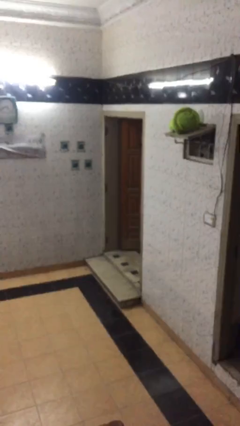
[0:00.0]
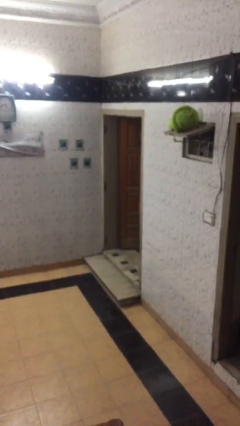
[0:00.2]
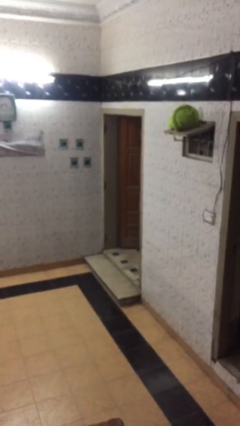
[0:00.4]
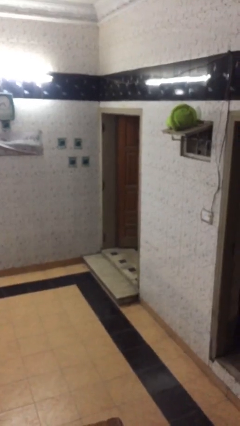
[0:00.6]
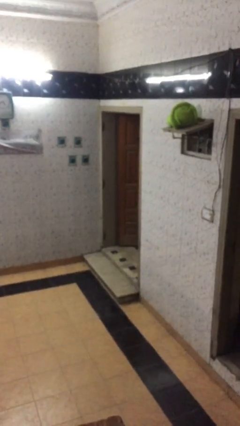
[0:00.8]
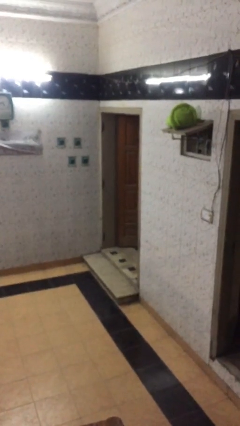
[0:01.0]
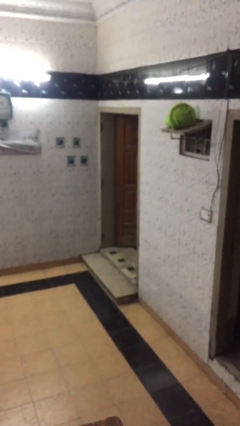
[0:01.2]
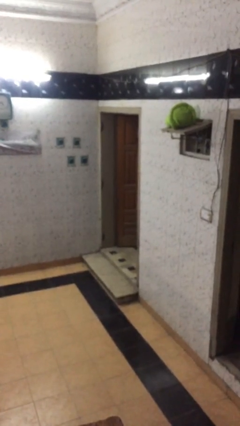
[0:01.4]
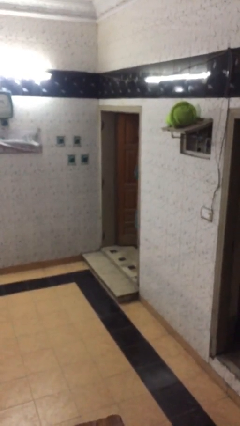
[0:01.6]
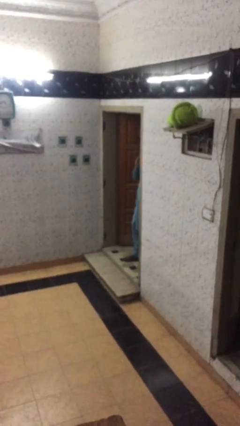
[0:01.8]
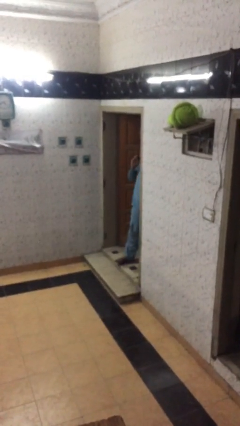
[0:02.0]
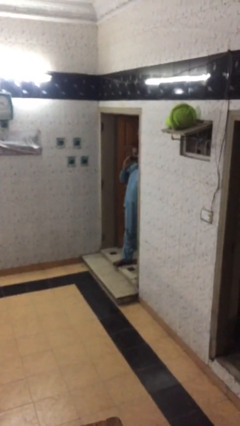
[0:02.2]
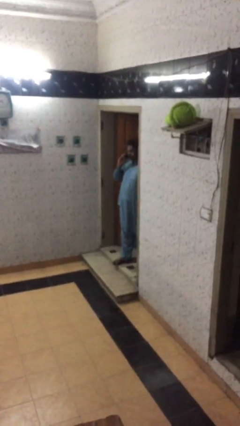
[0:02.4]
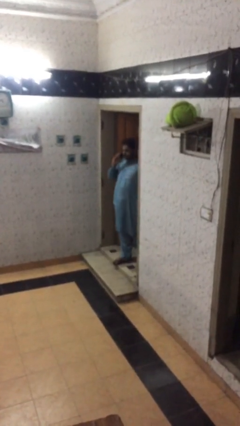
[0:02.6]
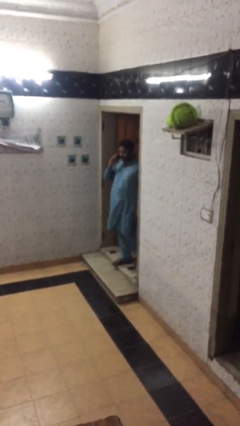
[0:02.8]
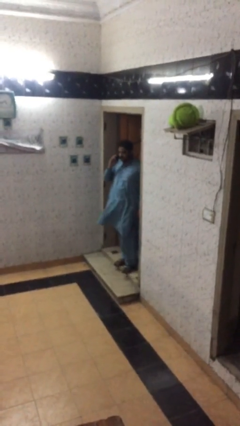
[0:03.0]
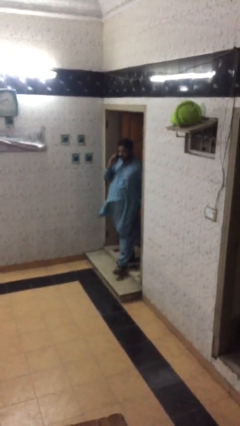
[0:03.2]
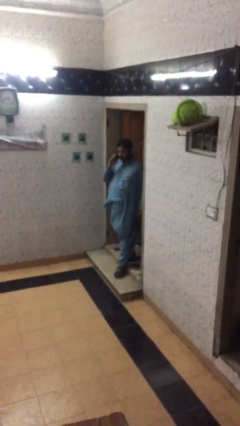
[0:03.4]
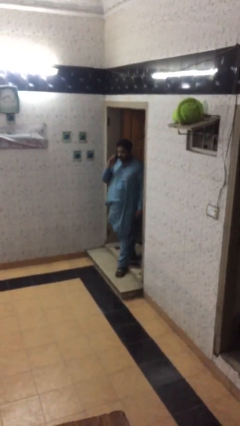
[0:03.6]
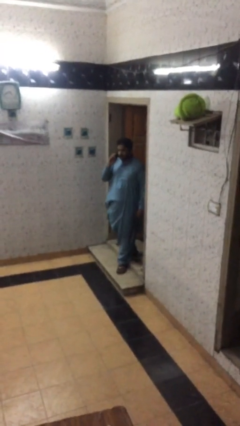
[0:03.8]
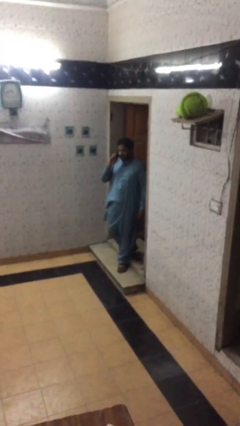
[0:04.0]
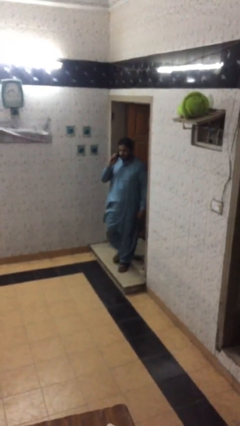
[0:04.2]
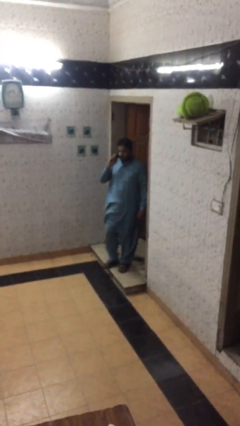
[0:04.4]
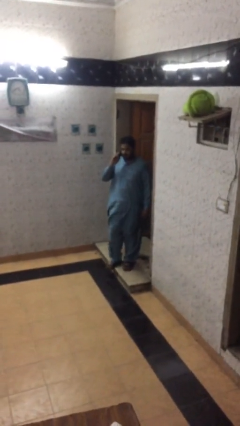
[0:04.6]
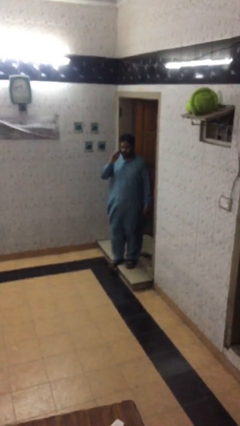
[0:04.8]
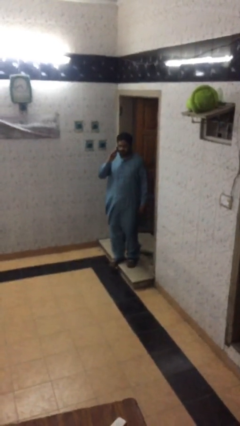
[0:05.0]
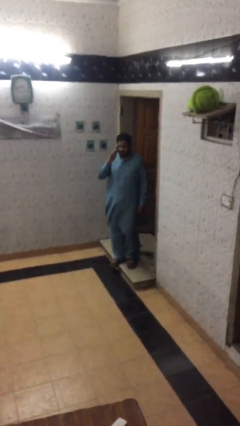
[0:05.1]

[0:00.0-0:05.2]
person enters scene through structure

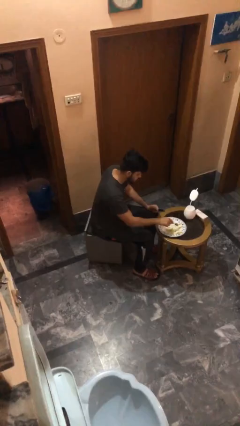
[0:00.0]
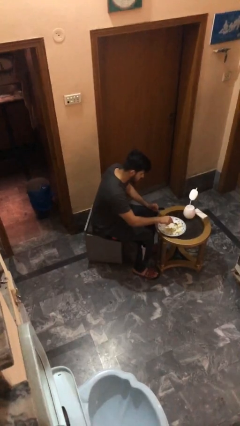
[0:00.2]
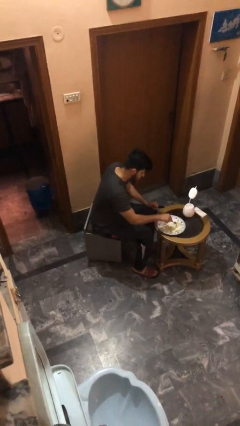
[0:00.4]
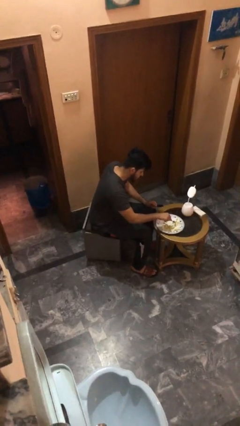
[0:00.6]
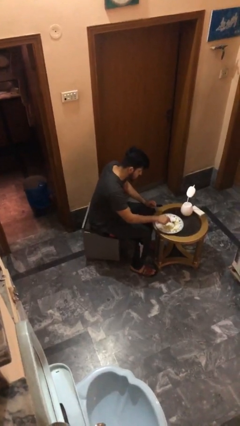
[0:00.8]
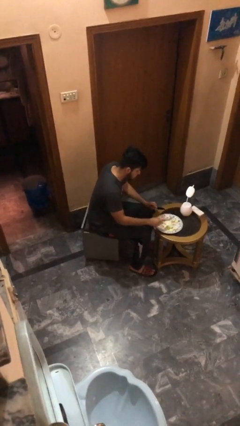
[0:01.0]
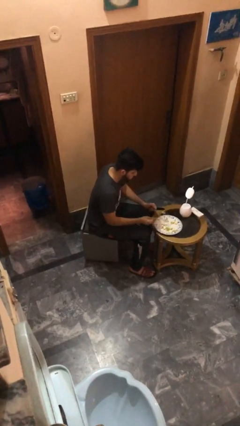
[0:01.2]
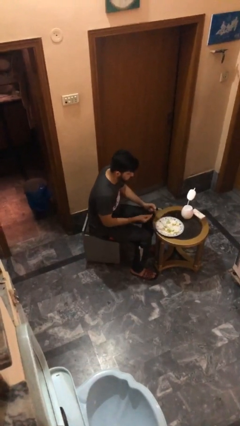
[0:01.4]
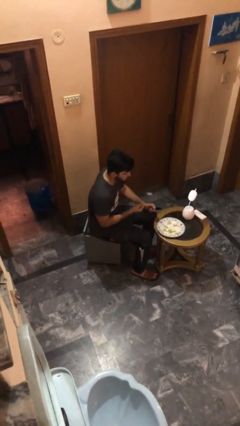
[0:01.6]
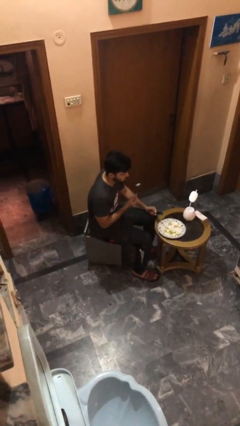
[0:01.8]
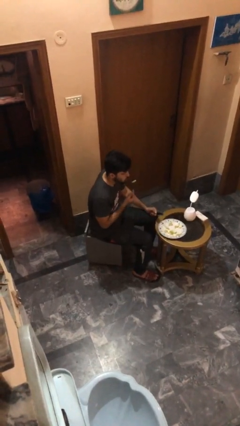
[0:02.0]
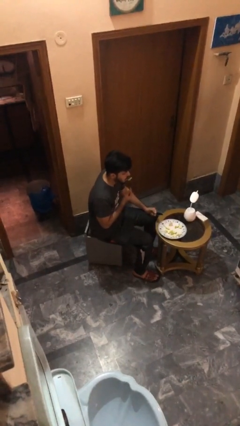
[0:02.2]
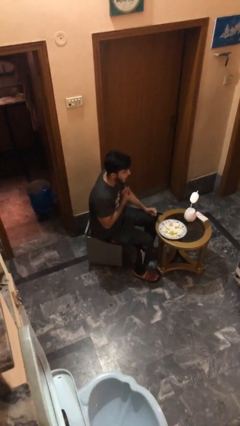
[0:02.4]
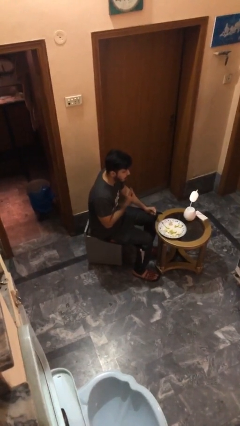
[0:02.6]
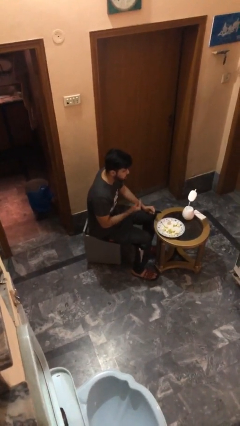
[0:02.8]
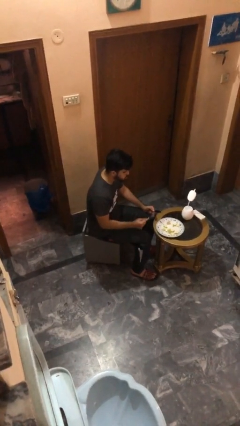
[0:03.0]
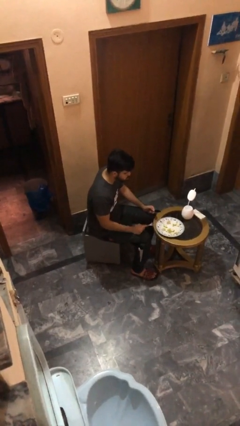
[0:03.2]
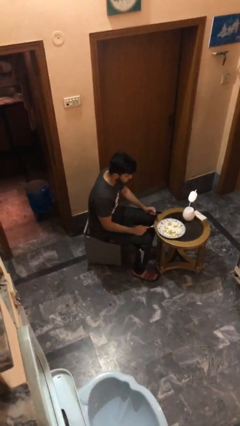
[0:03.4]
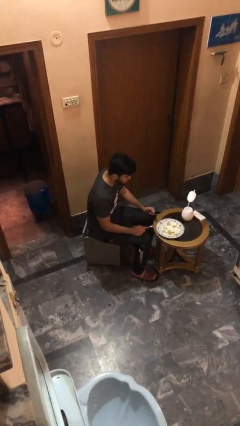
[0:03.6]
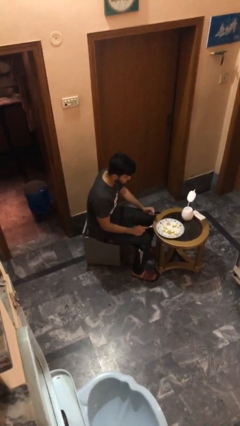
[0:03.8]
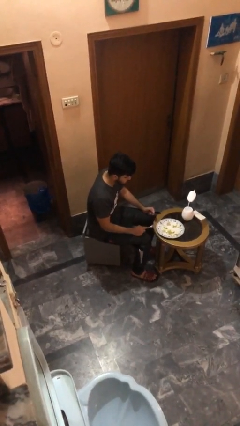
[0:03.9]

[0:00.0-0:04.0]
person eats with utensil

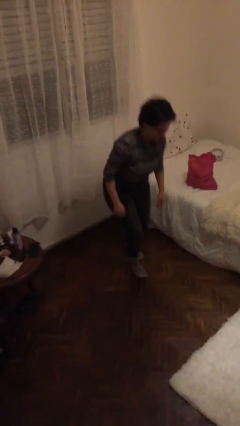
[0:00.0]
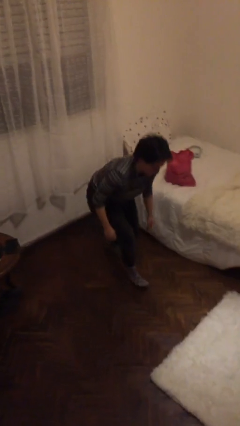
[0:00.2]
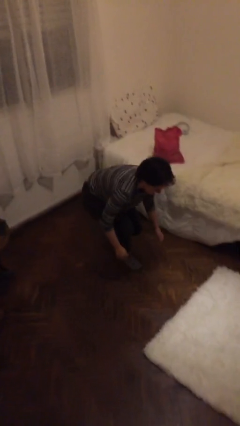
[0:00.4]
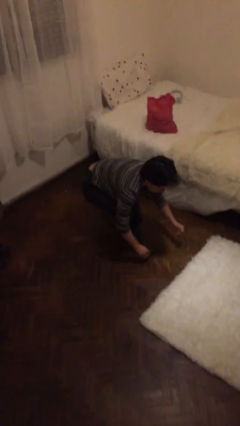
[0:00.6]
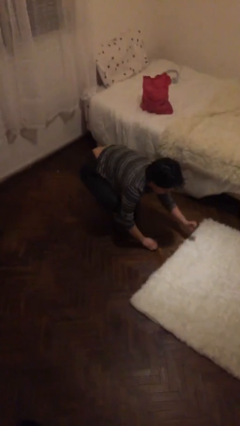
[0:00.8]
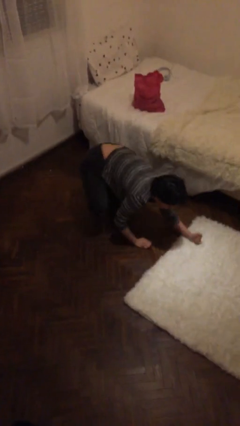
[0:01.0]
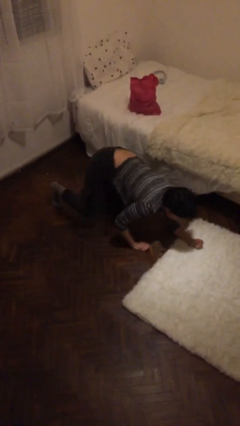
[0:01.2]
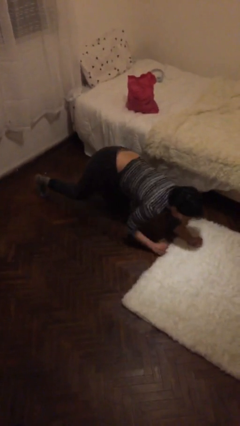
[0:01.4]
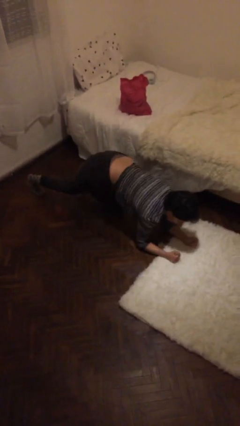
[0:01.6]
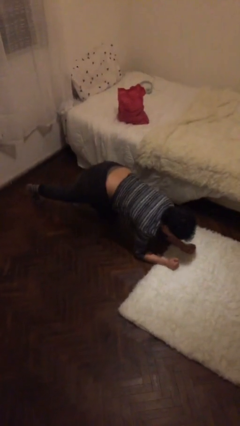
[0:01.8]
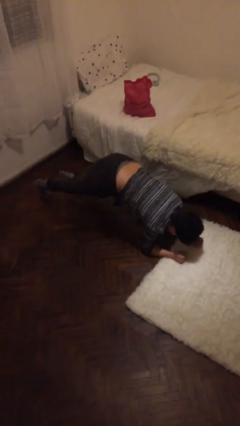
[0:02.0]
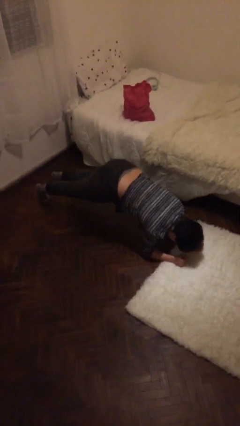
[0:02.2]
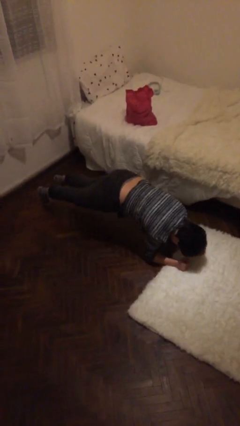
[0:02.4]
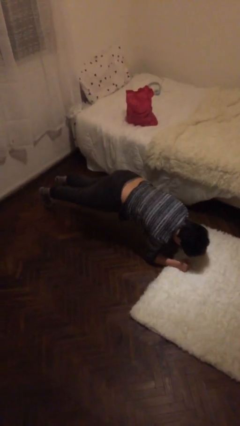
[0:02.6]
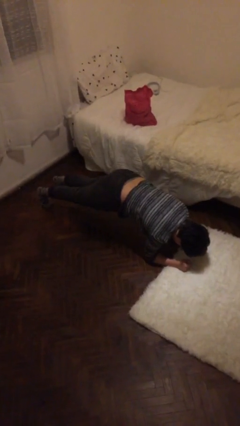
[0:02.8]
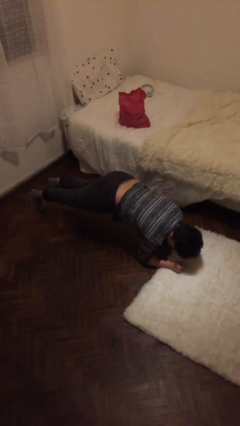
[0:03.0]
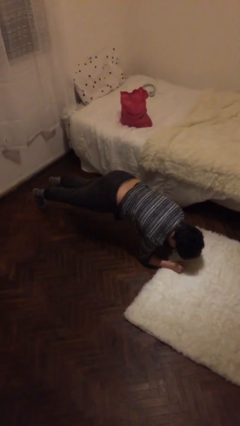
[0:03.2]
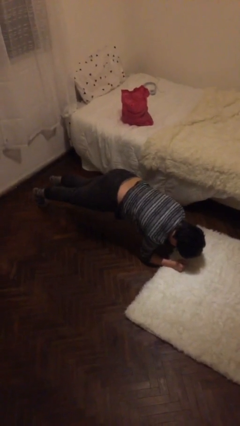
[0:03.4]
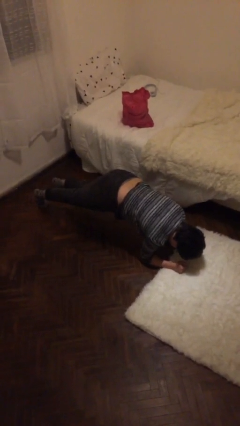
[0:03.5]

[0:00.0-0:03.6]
person exercises with plank

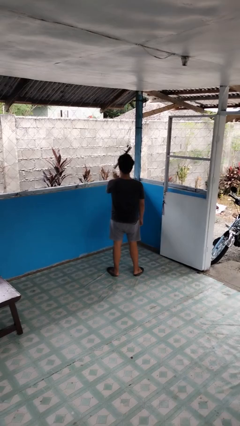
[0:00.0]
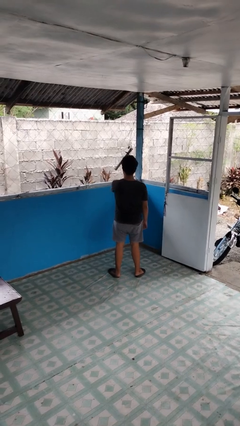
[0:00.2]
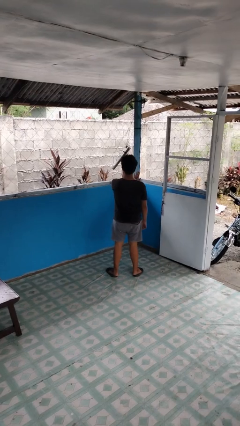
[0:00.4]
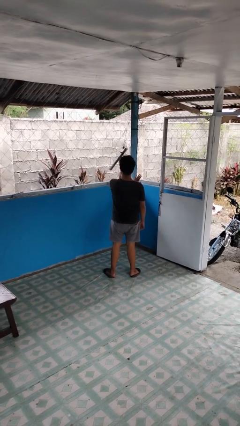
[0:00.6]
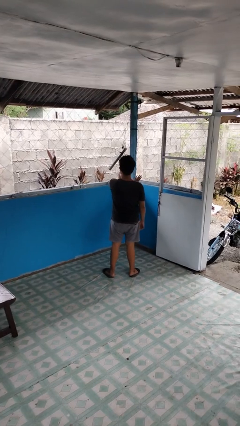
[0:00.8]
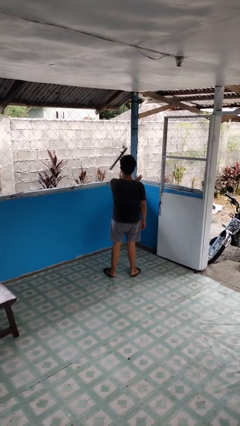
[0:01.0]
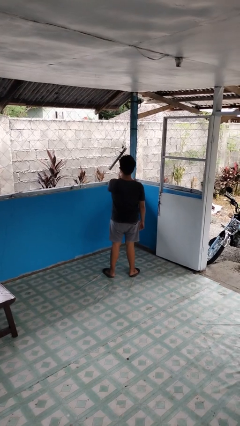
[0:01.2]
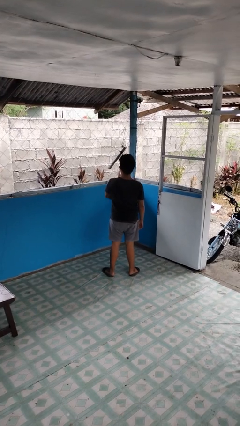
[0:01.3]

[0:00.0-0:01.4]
person gestures swipe right

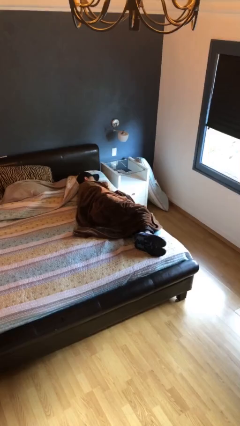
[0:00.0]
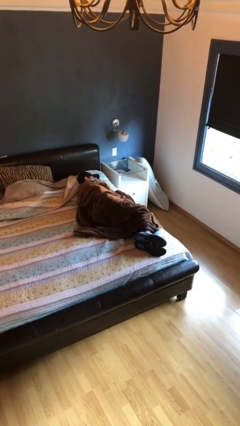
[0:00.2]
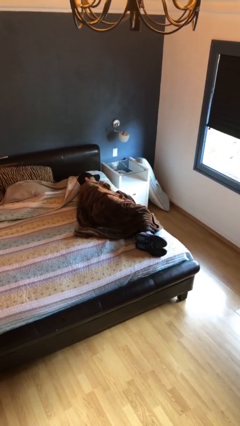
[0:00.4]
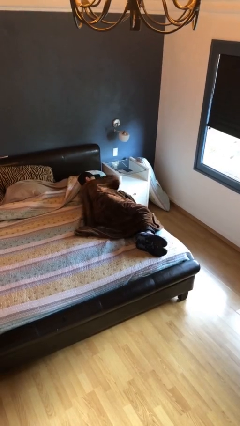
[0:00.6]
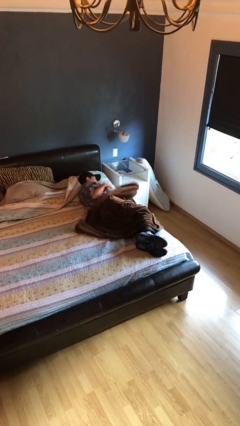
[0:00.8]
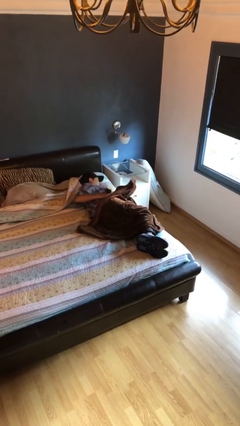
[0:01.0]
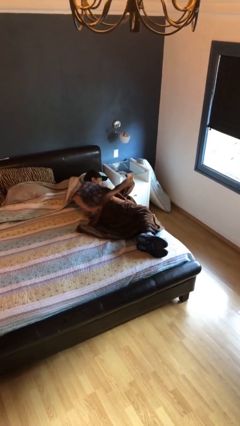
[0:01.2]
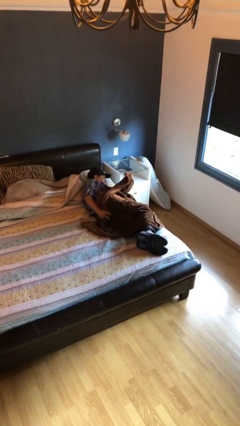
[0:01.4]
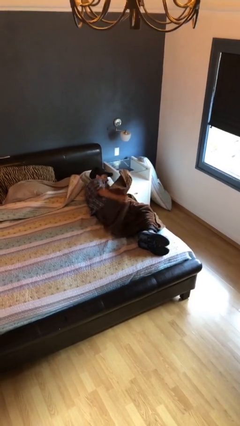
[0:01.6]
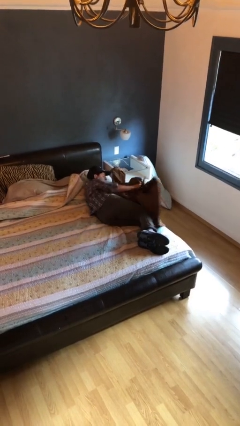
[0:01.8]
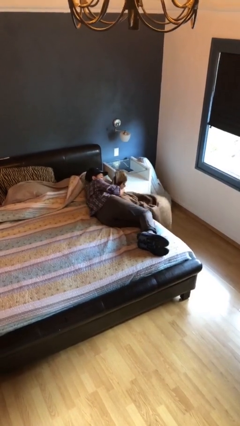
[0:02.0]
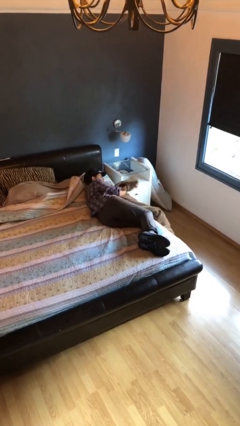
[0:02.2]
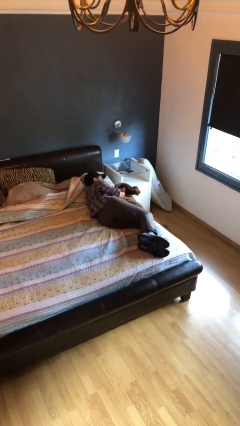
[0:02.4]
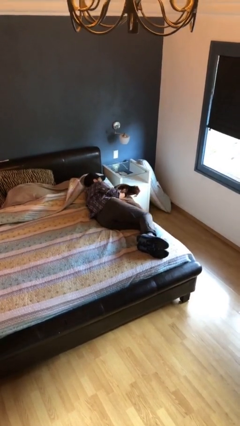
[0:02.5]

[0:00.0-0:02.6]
person uncovers with blanket

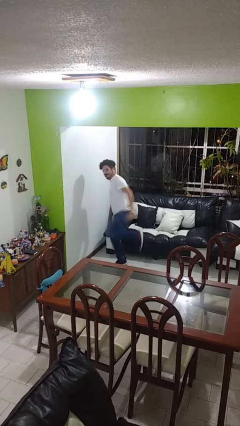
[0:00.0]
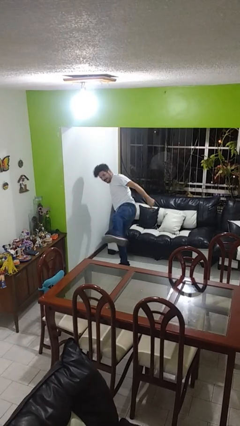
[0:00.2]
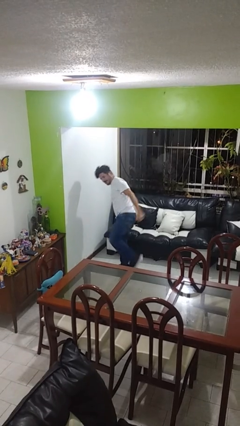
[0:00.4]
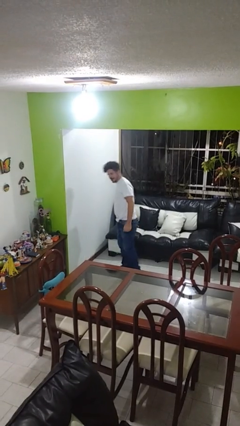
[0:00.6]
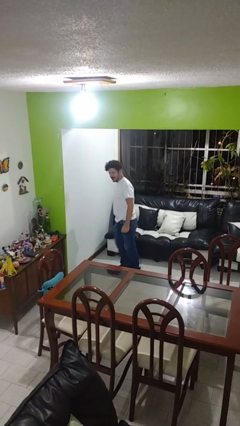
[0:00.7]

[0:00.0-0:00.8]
person karate kicks
